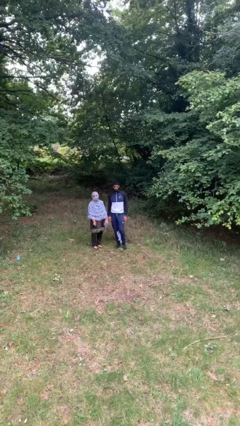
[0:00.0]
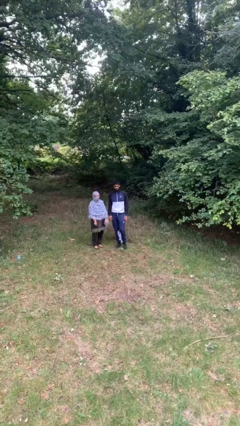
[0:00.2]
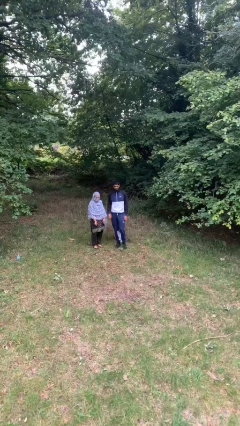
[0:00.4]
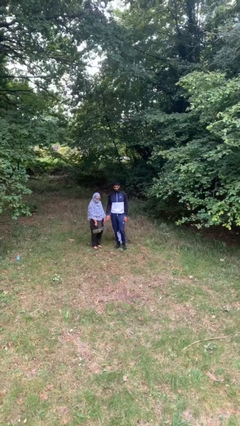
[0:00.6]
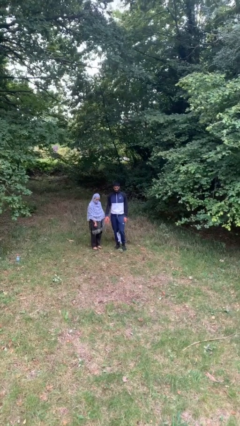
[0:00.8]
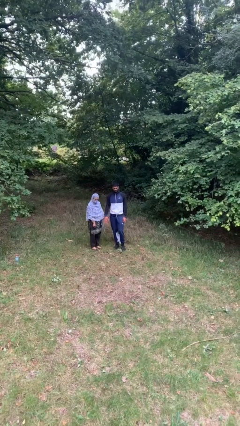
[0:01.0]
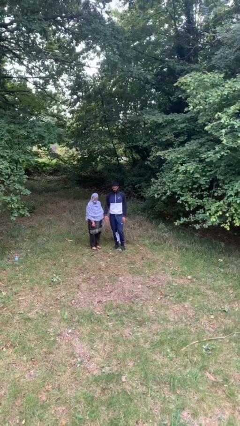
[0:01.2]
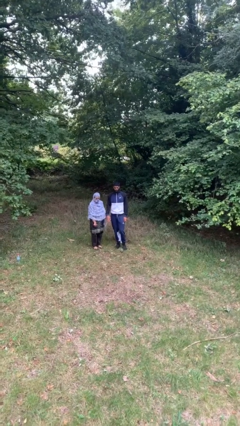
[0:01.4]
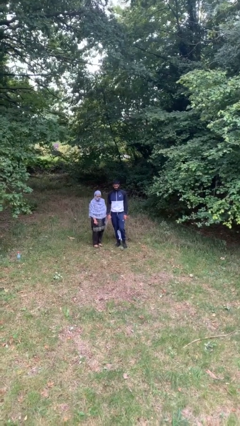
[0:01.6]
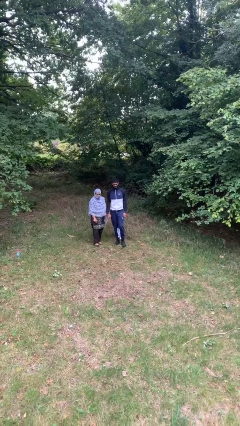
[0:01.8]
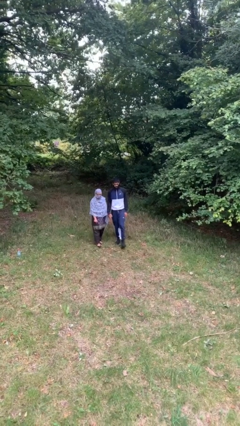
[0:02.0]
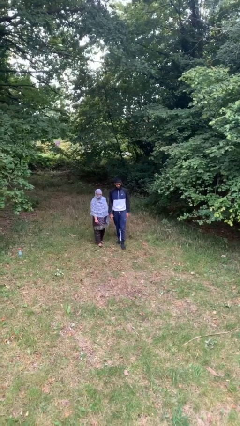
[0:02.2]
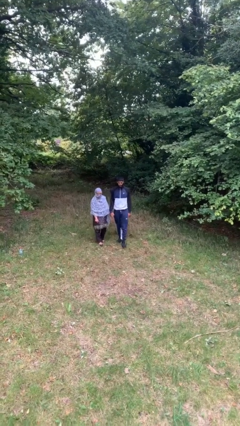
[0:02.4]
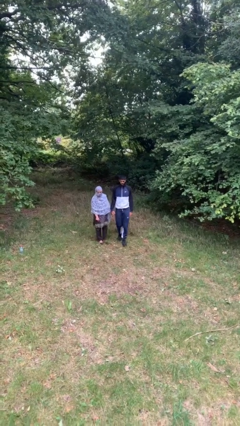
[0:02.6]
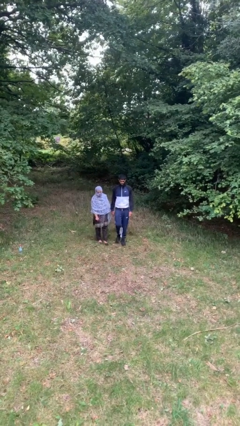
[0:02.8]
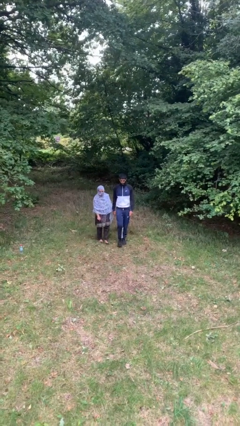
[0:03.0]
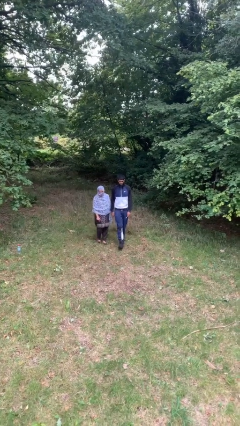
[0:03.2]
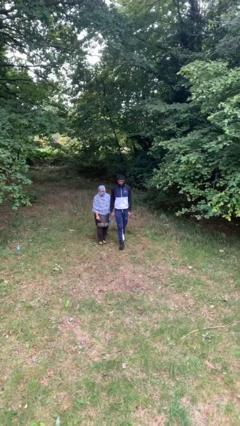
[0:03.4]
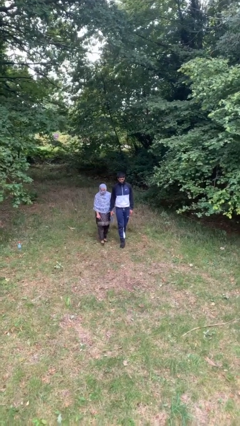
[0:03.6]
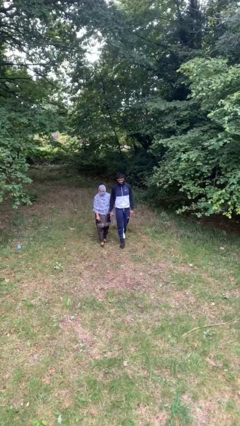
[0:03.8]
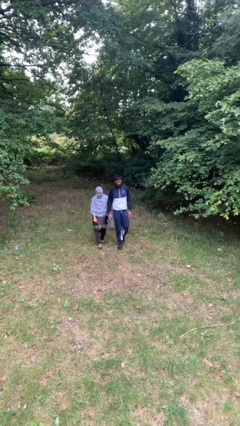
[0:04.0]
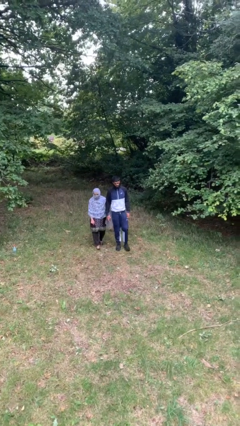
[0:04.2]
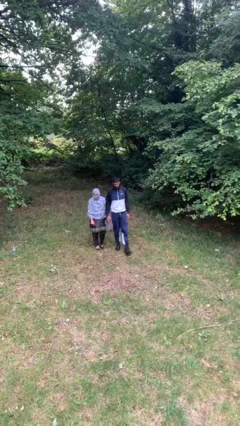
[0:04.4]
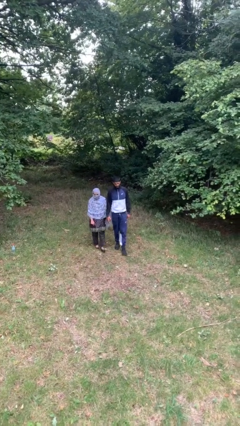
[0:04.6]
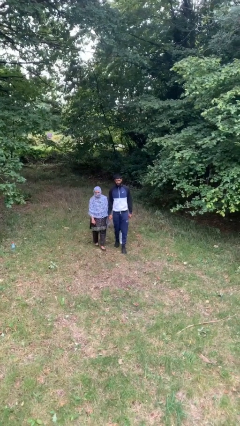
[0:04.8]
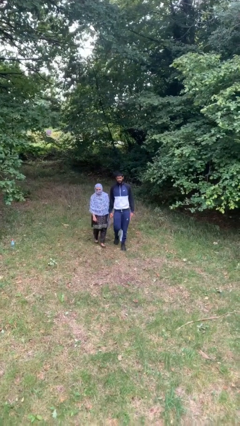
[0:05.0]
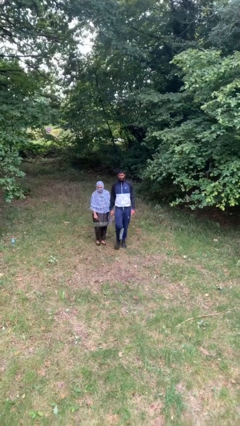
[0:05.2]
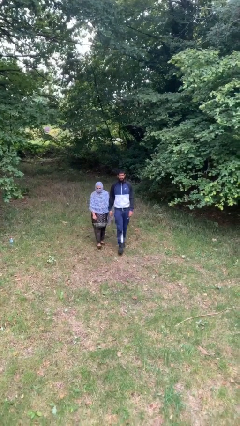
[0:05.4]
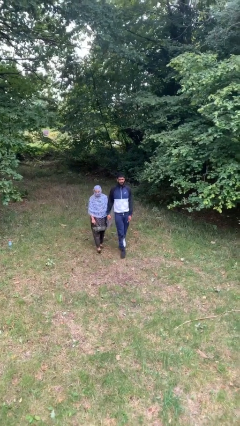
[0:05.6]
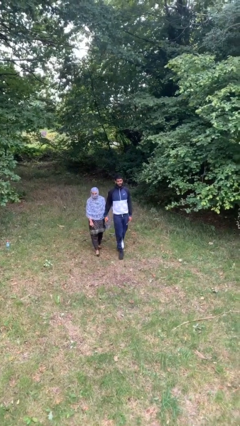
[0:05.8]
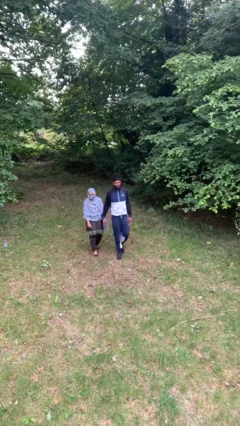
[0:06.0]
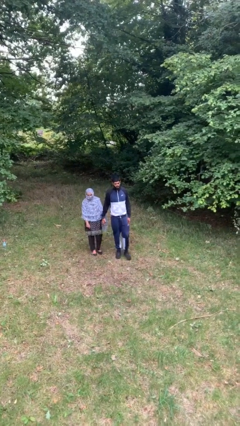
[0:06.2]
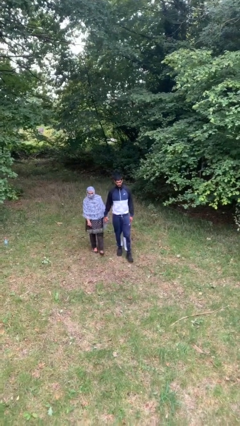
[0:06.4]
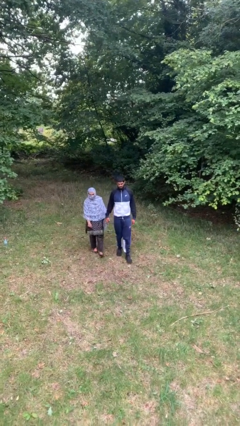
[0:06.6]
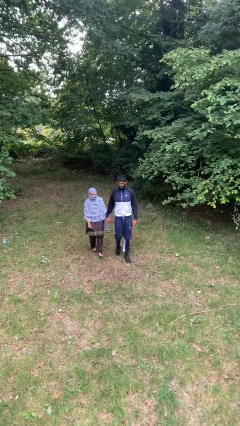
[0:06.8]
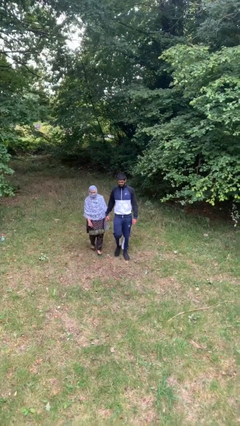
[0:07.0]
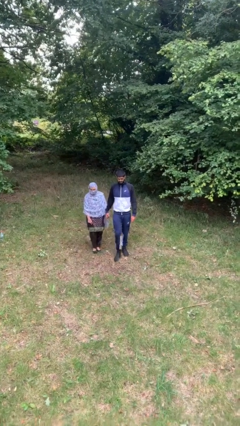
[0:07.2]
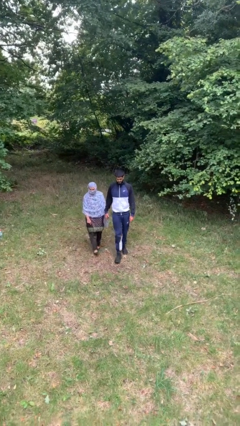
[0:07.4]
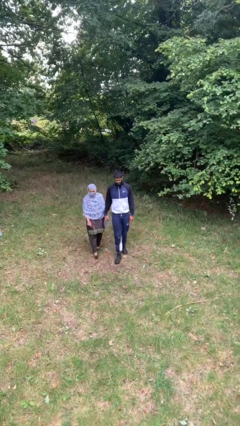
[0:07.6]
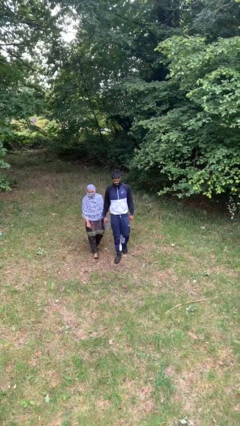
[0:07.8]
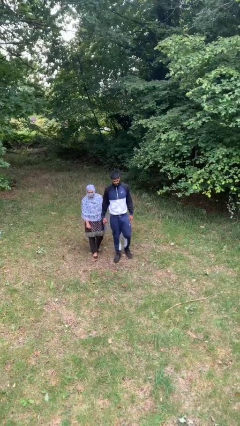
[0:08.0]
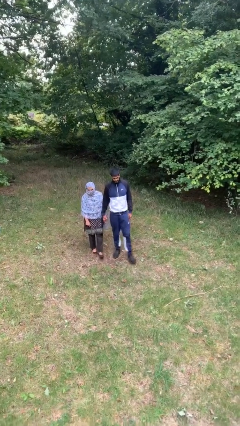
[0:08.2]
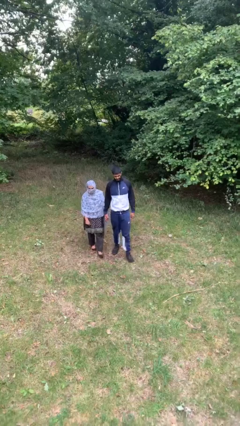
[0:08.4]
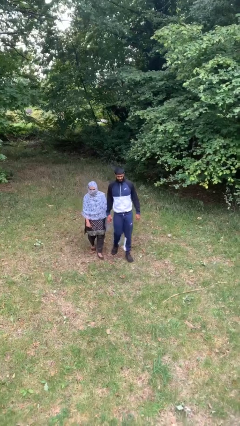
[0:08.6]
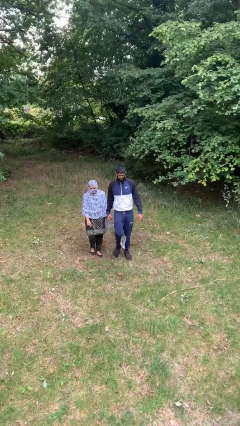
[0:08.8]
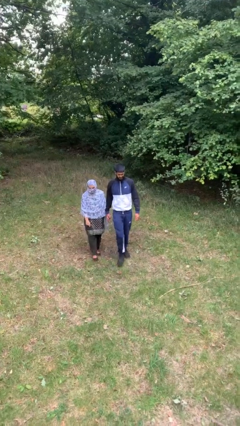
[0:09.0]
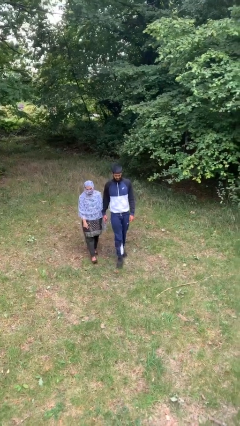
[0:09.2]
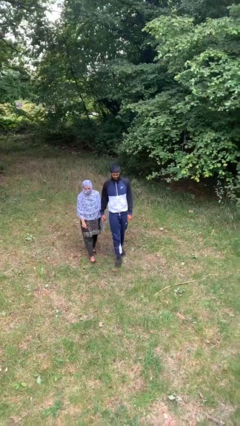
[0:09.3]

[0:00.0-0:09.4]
person holds hand

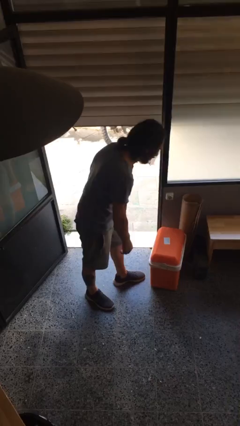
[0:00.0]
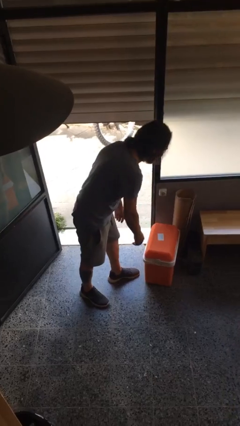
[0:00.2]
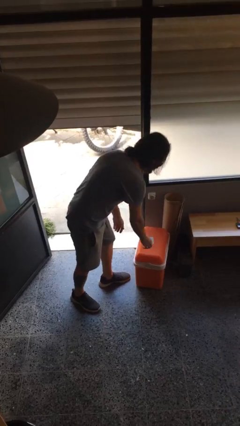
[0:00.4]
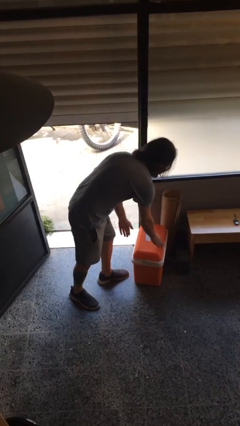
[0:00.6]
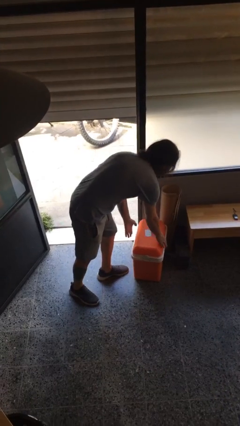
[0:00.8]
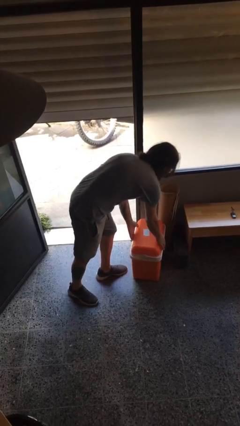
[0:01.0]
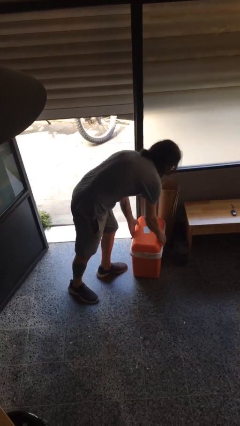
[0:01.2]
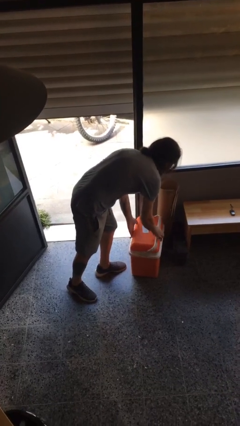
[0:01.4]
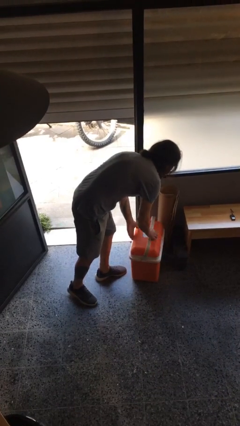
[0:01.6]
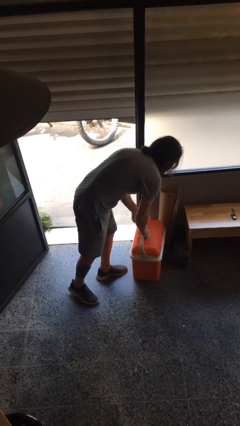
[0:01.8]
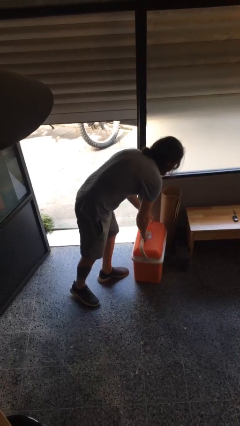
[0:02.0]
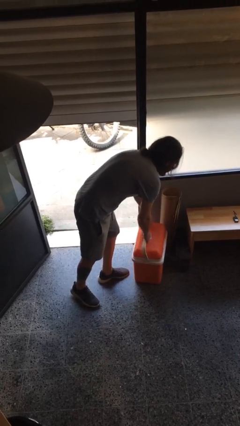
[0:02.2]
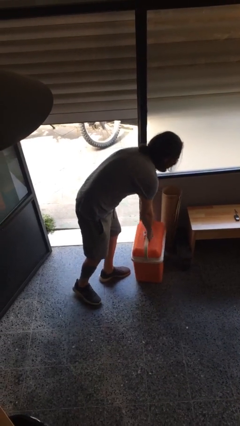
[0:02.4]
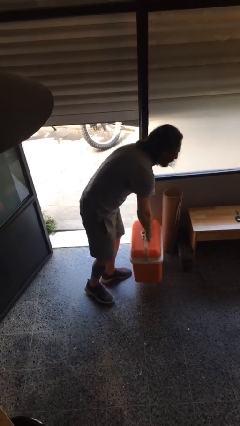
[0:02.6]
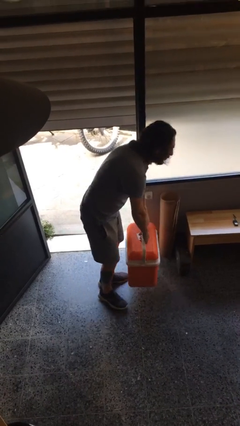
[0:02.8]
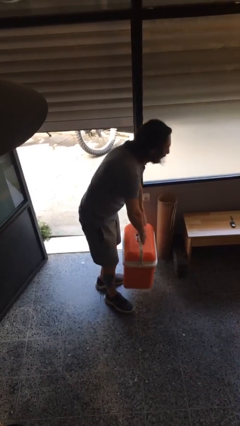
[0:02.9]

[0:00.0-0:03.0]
person picks up object from floor

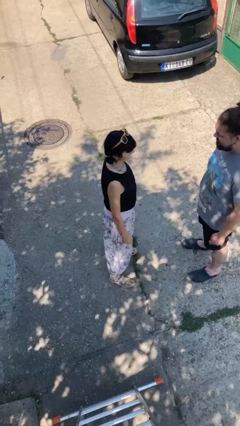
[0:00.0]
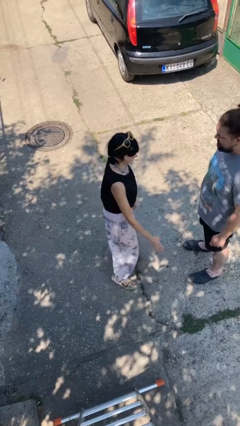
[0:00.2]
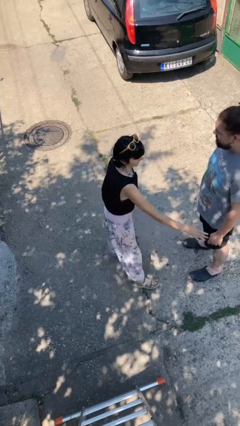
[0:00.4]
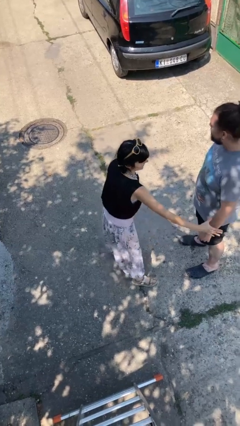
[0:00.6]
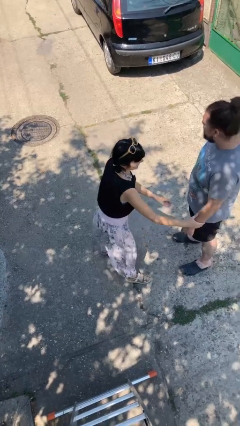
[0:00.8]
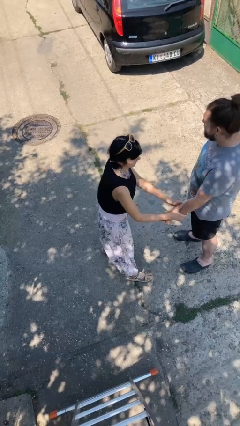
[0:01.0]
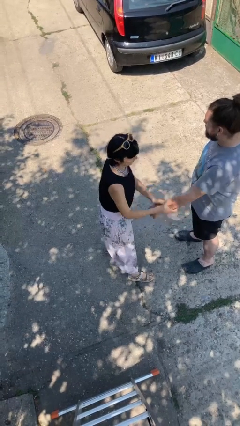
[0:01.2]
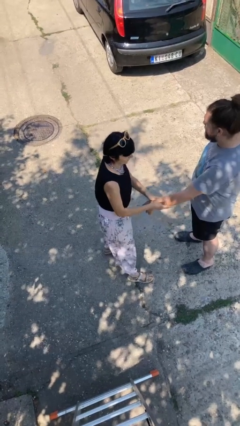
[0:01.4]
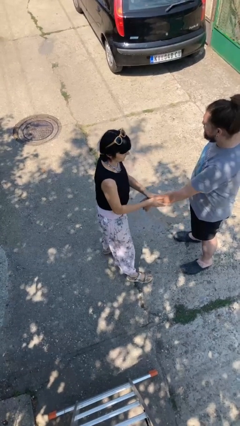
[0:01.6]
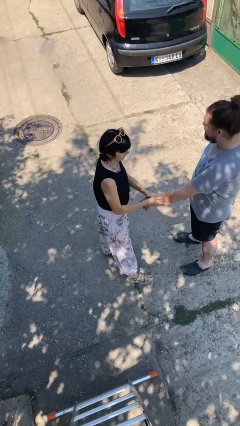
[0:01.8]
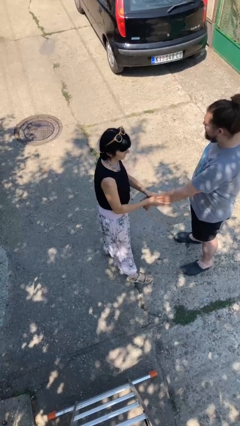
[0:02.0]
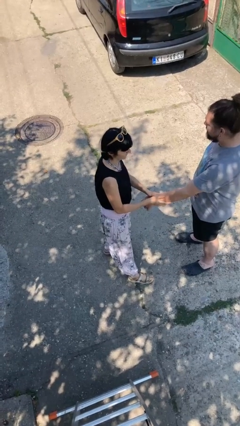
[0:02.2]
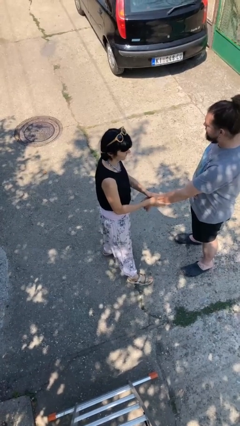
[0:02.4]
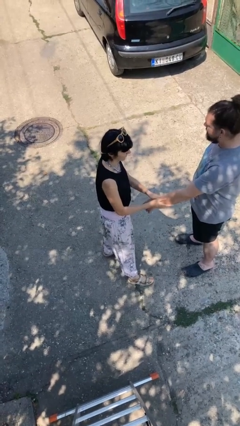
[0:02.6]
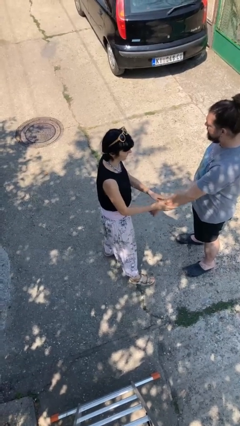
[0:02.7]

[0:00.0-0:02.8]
person grabs person by forearm

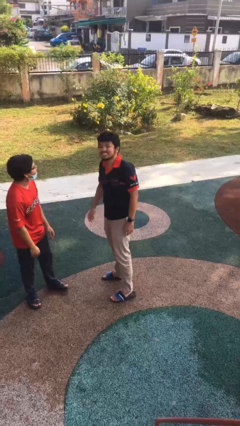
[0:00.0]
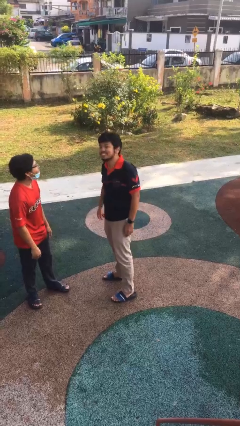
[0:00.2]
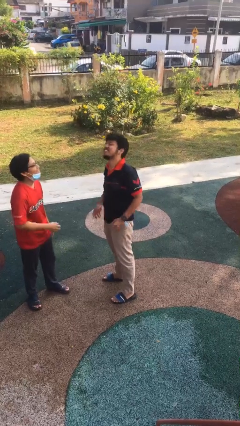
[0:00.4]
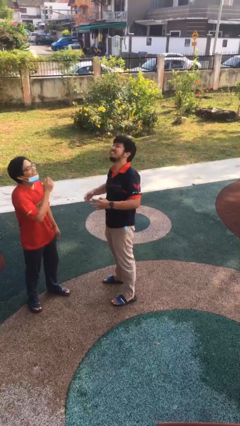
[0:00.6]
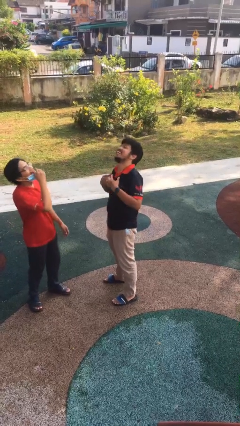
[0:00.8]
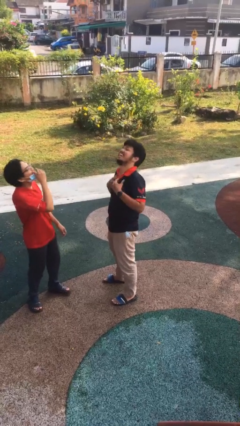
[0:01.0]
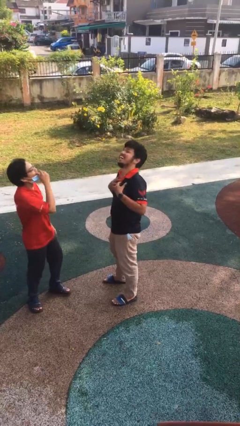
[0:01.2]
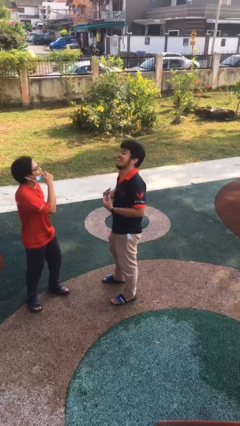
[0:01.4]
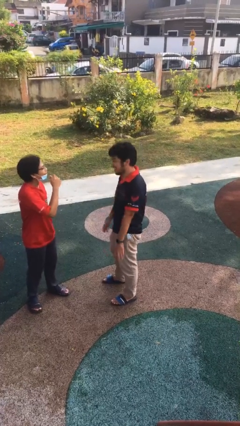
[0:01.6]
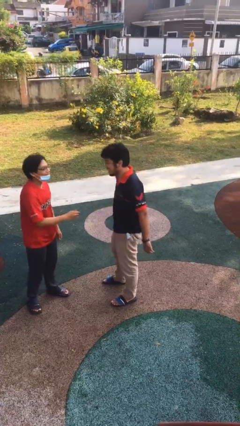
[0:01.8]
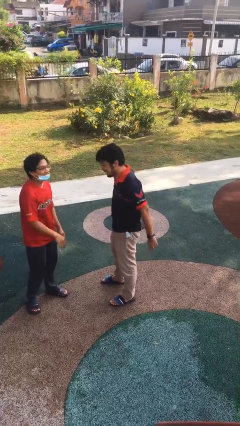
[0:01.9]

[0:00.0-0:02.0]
person laughs with person

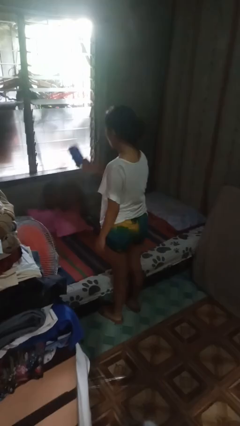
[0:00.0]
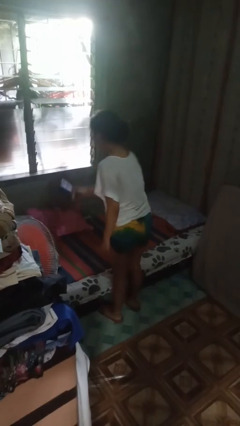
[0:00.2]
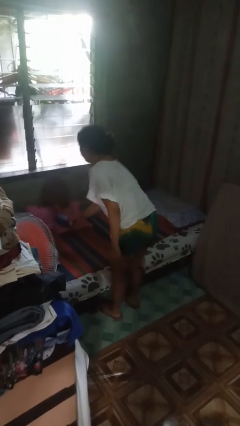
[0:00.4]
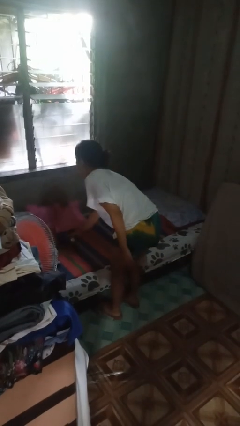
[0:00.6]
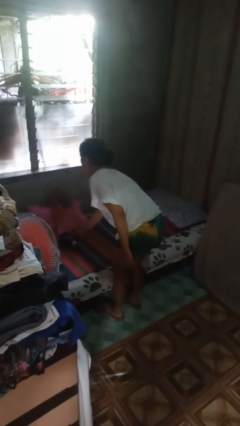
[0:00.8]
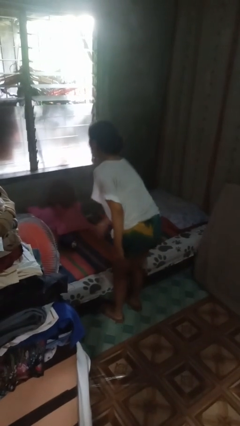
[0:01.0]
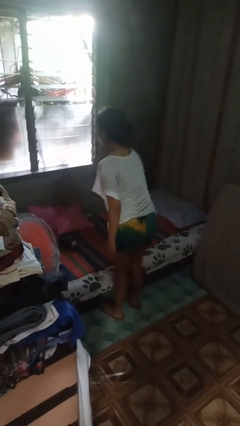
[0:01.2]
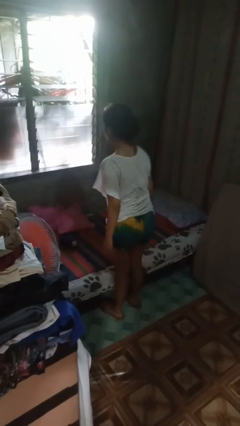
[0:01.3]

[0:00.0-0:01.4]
person puts down object on bed
